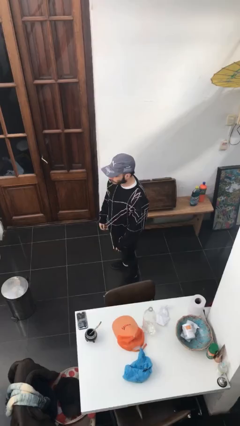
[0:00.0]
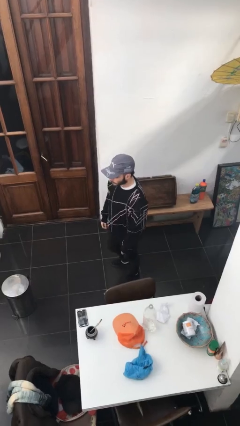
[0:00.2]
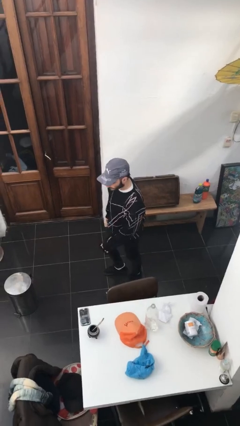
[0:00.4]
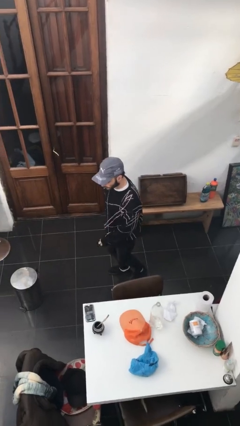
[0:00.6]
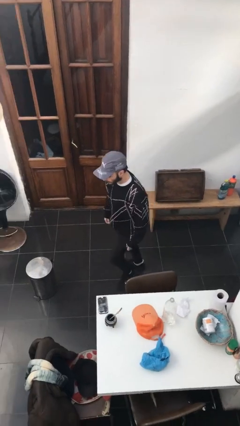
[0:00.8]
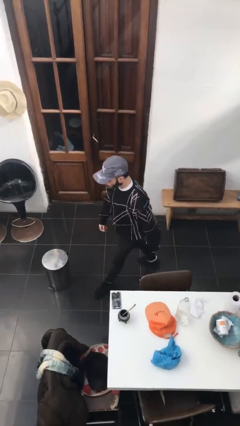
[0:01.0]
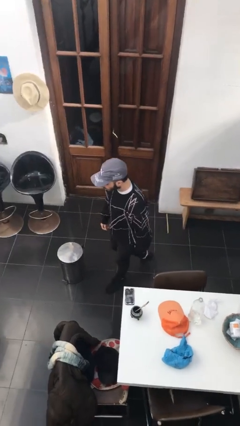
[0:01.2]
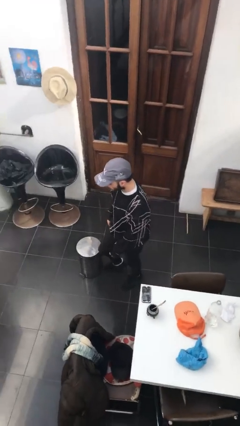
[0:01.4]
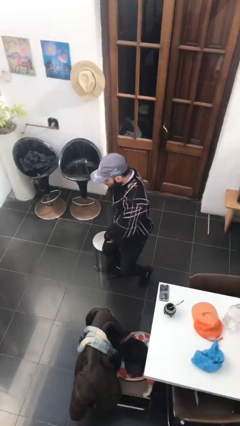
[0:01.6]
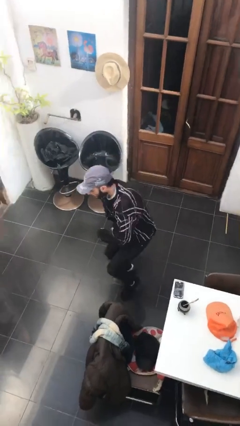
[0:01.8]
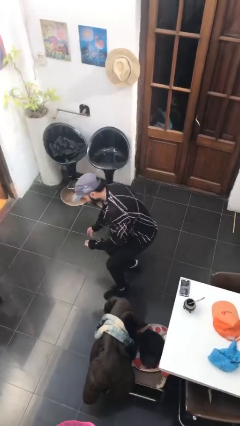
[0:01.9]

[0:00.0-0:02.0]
person trips on object on floor

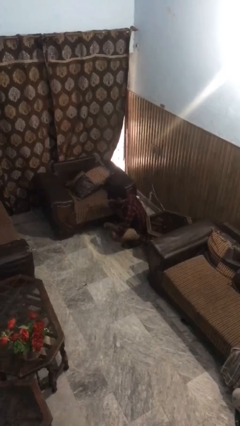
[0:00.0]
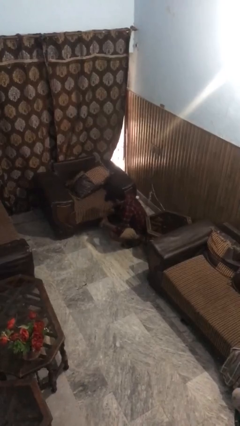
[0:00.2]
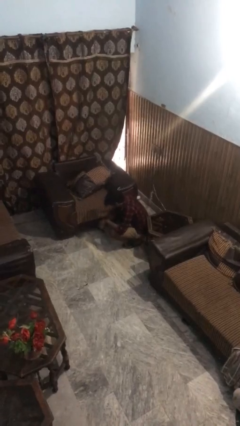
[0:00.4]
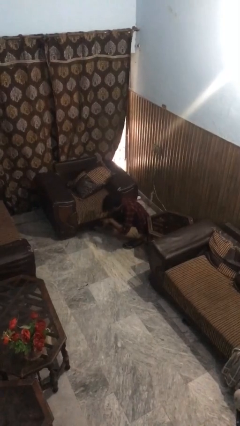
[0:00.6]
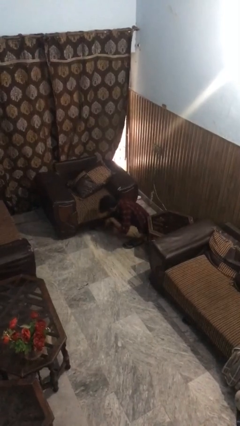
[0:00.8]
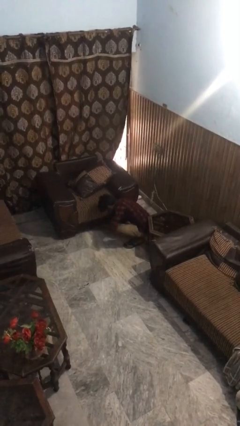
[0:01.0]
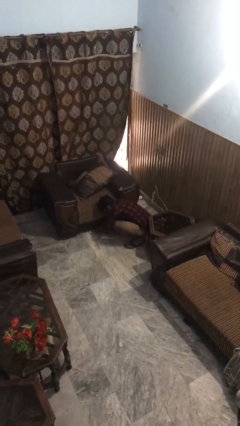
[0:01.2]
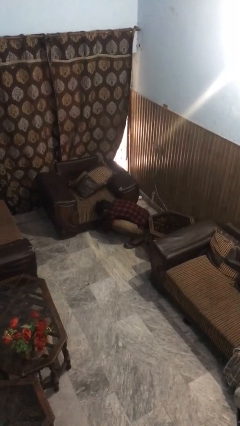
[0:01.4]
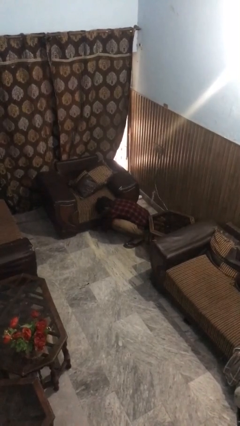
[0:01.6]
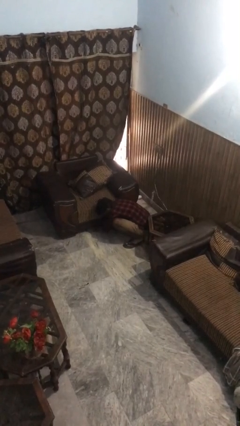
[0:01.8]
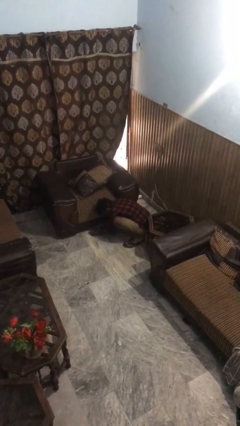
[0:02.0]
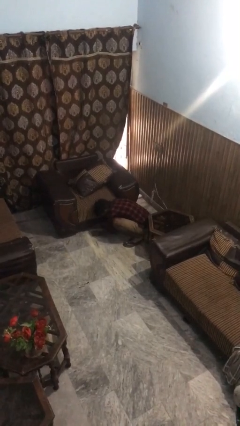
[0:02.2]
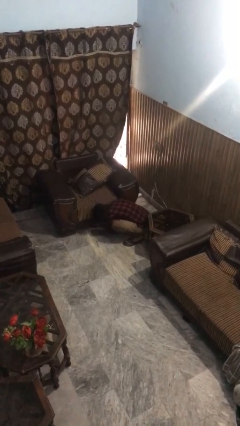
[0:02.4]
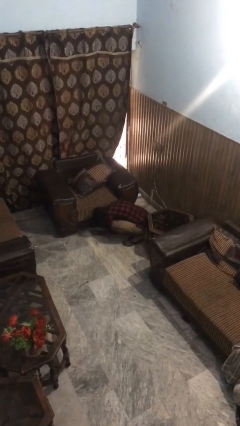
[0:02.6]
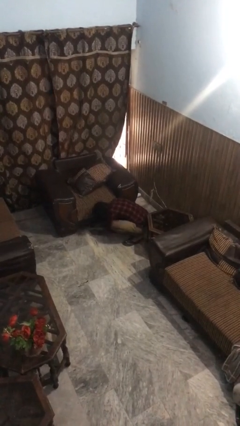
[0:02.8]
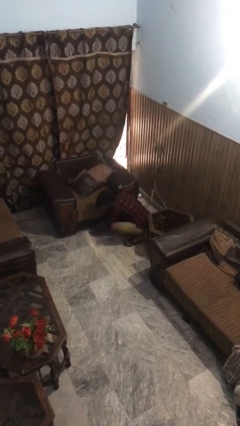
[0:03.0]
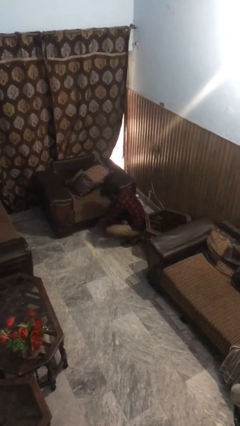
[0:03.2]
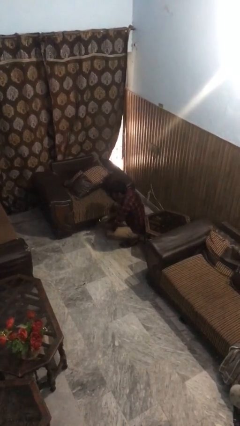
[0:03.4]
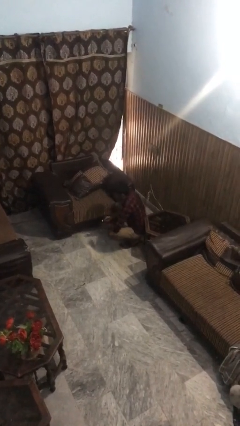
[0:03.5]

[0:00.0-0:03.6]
person searches under couch

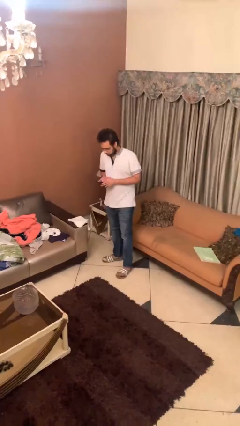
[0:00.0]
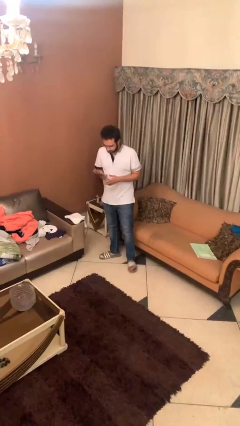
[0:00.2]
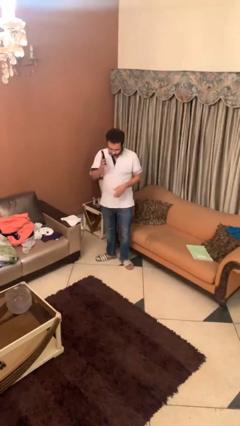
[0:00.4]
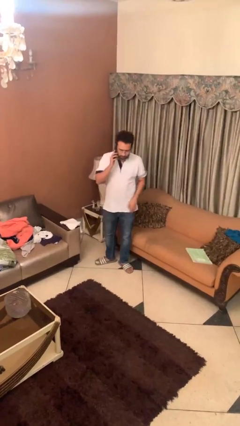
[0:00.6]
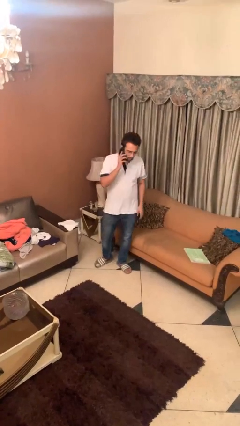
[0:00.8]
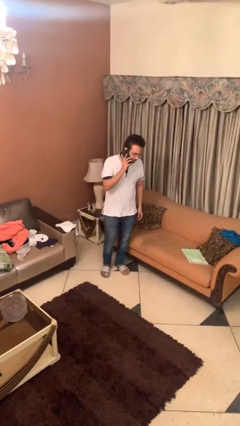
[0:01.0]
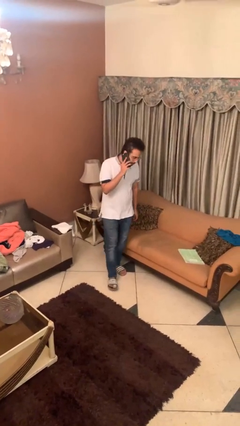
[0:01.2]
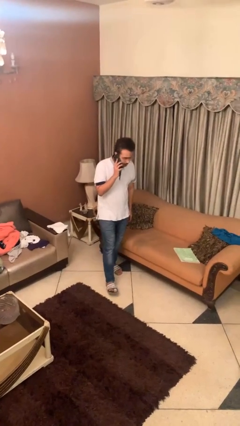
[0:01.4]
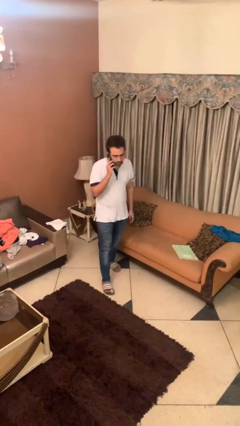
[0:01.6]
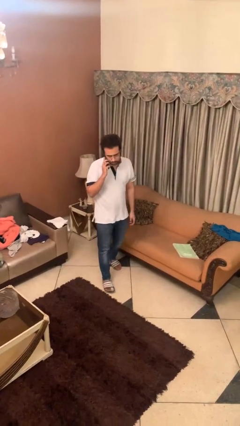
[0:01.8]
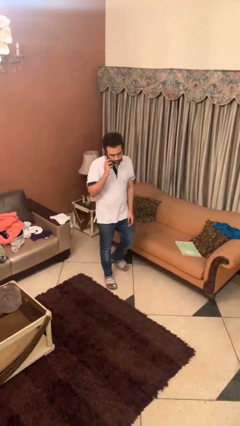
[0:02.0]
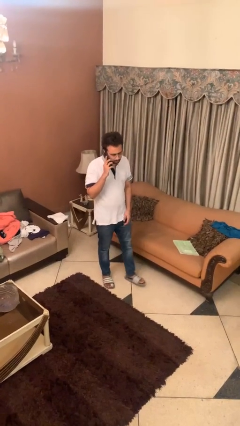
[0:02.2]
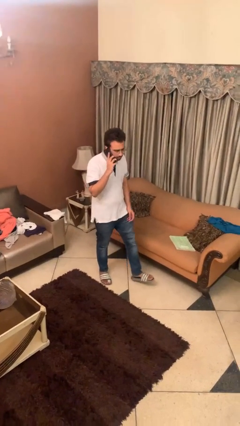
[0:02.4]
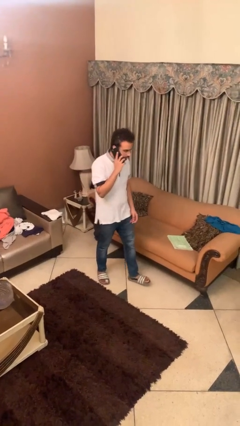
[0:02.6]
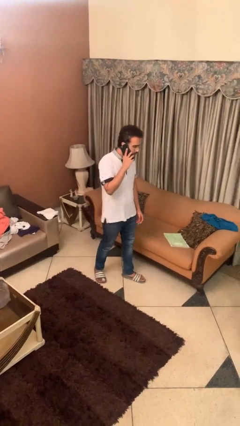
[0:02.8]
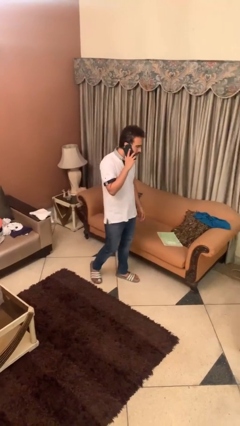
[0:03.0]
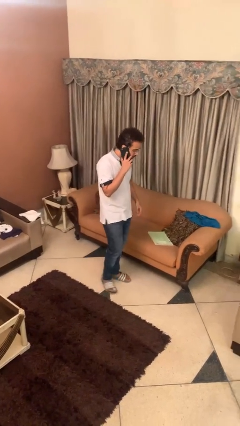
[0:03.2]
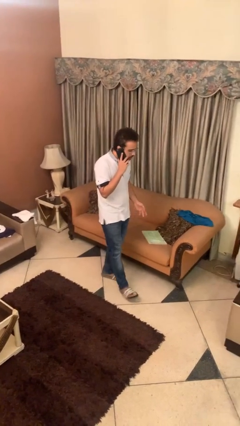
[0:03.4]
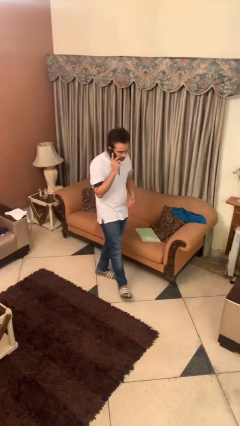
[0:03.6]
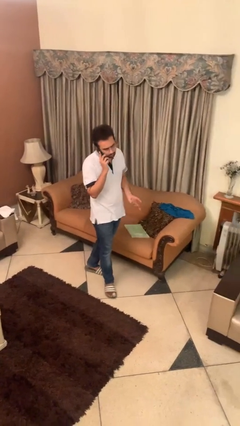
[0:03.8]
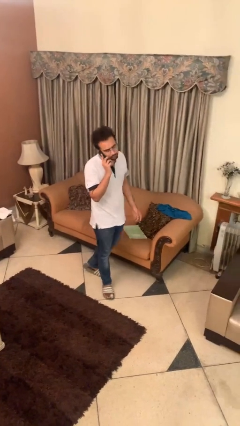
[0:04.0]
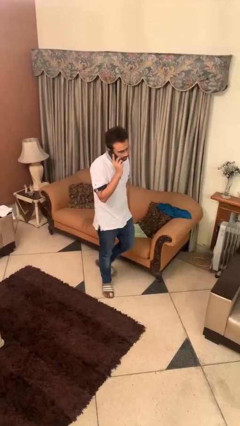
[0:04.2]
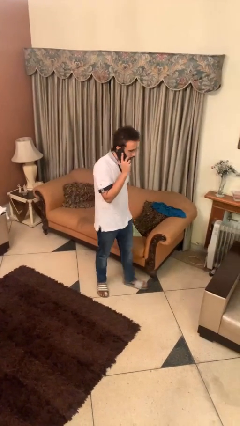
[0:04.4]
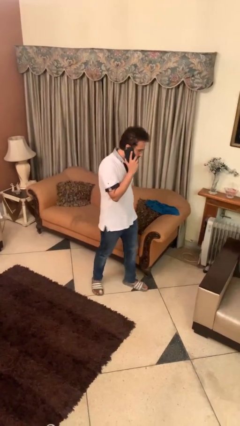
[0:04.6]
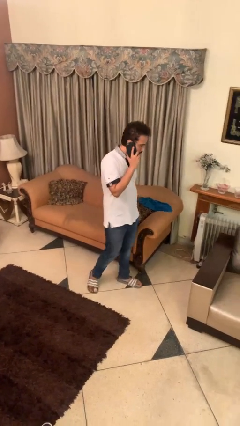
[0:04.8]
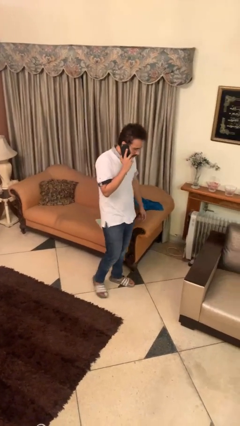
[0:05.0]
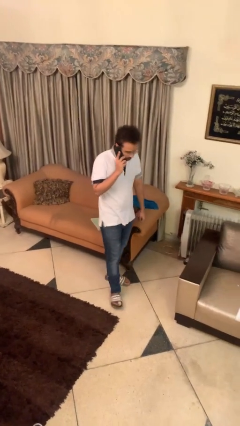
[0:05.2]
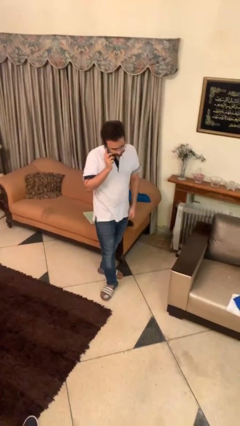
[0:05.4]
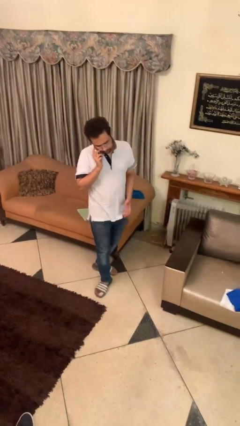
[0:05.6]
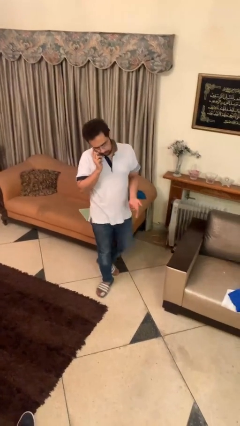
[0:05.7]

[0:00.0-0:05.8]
person talks on phone

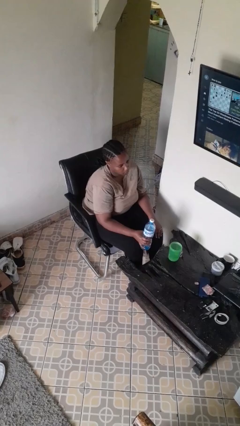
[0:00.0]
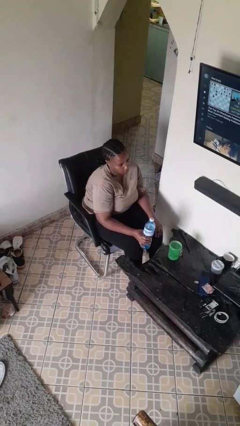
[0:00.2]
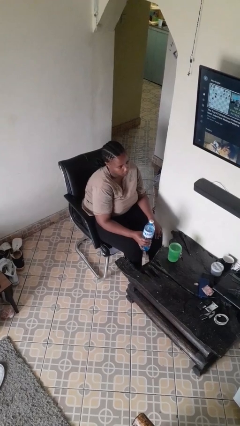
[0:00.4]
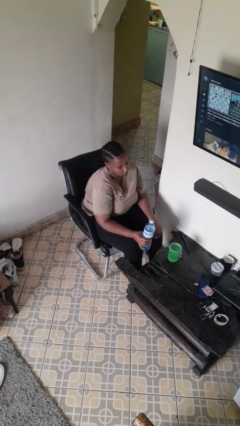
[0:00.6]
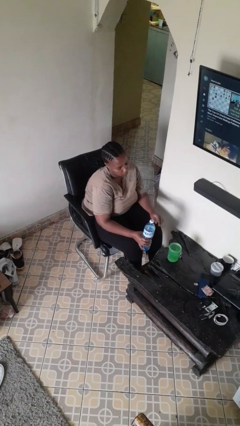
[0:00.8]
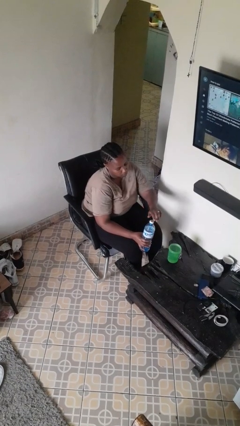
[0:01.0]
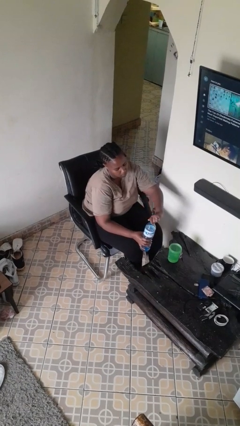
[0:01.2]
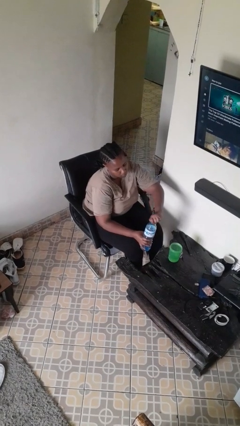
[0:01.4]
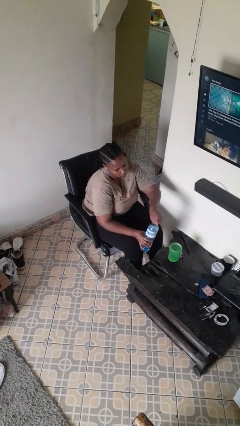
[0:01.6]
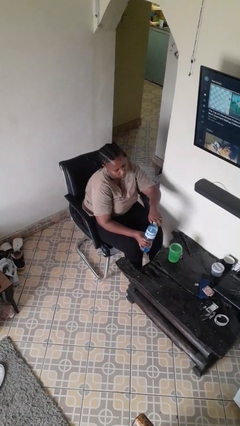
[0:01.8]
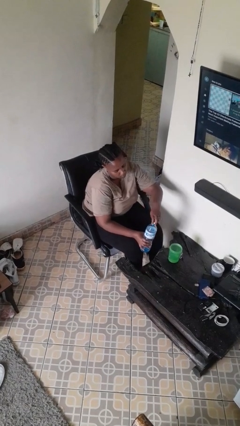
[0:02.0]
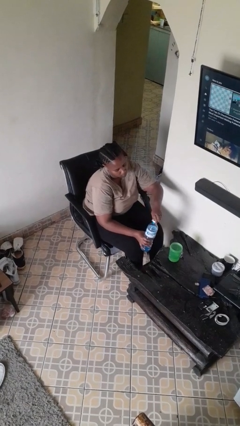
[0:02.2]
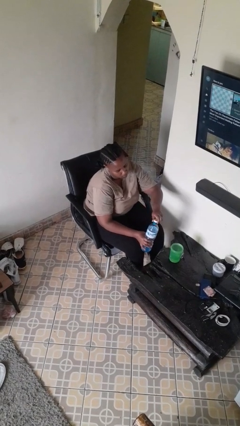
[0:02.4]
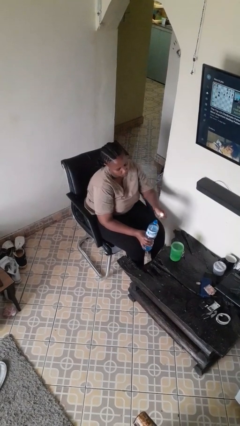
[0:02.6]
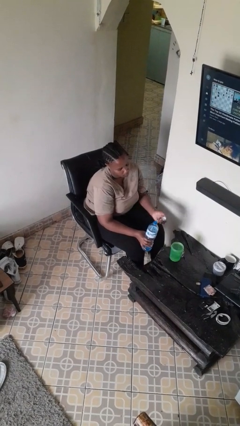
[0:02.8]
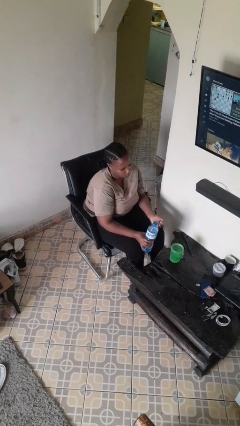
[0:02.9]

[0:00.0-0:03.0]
person unscrews lid from bottle

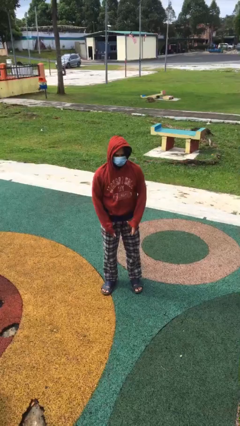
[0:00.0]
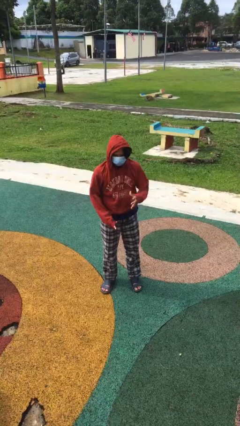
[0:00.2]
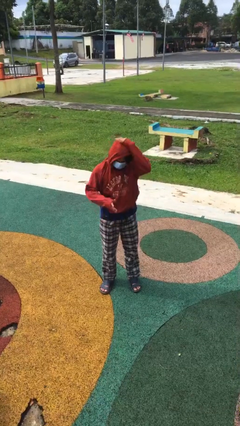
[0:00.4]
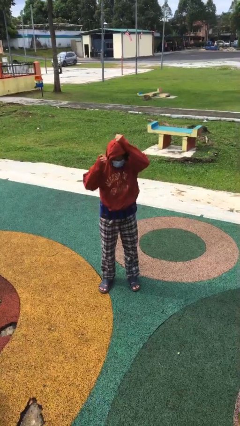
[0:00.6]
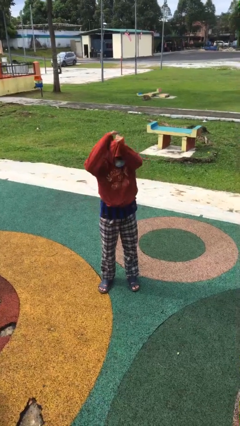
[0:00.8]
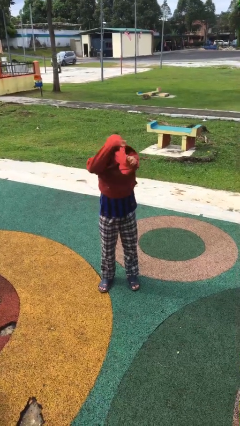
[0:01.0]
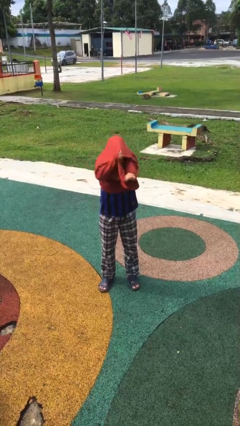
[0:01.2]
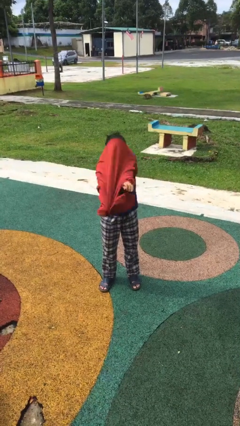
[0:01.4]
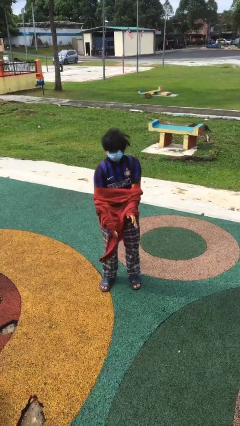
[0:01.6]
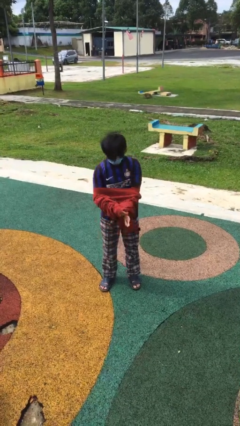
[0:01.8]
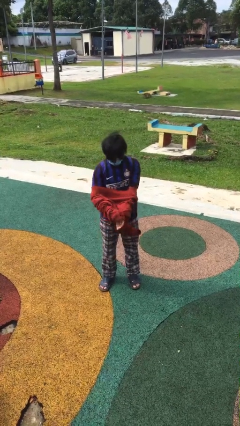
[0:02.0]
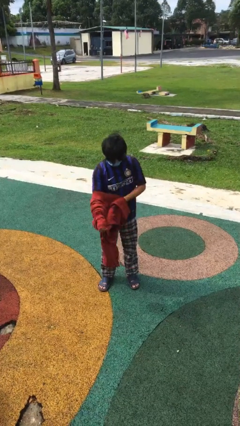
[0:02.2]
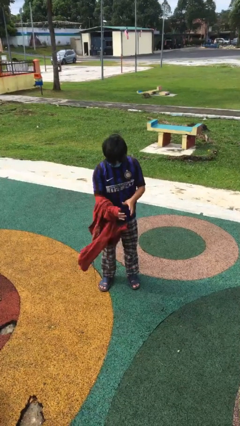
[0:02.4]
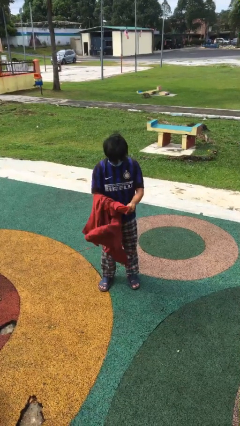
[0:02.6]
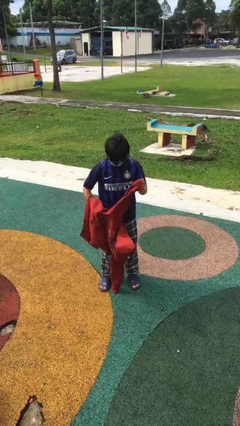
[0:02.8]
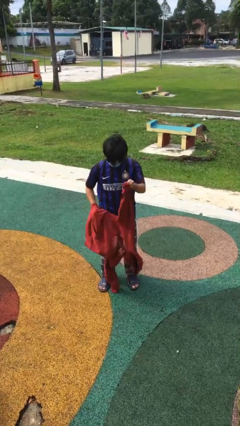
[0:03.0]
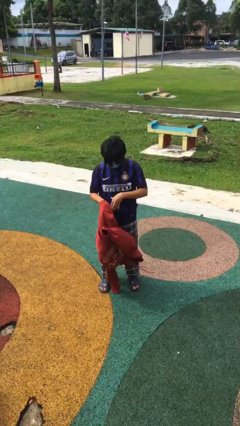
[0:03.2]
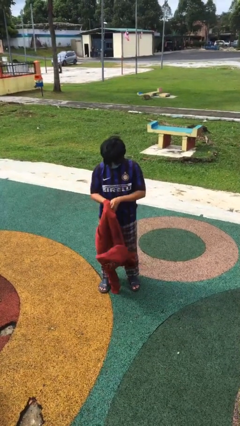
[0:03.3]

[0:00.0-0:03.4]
person takes off hoodie
